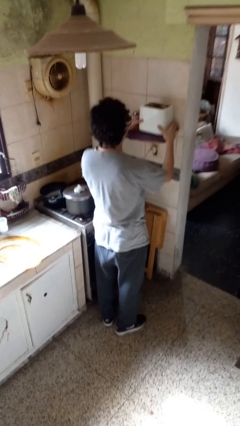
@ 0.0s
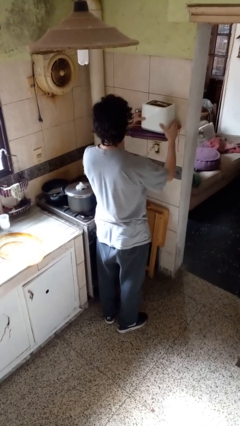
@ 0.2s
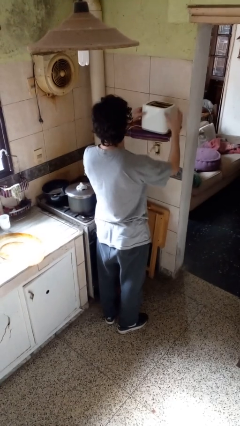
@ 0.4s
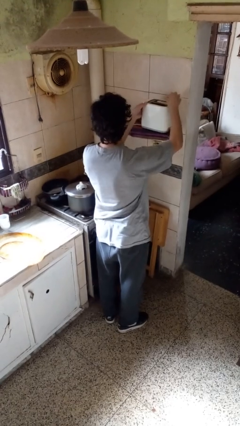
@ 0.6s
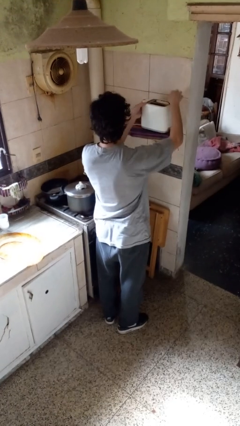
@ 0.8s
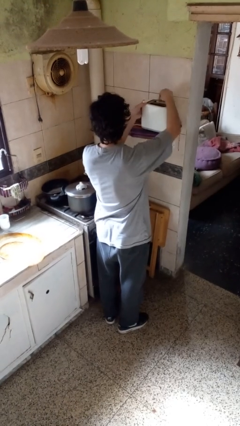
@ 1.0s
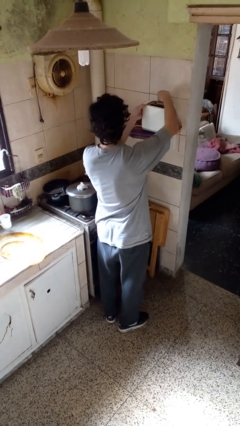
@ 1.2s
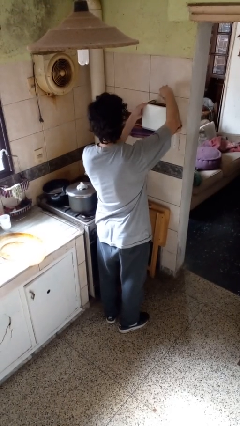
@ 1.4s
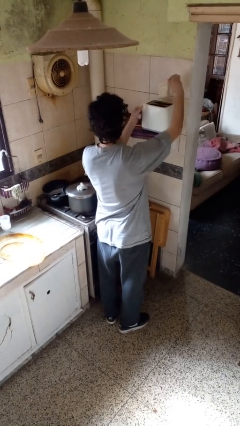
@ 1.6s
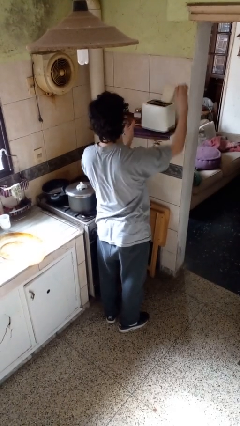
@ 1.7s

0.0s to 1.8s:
person takes object from toaster

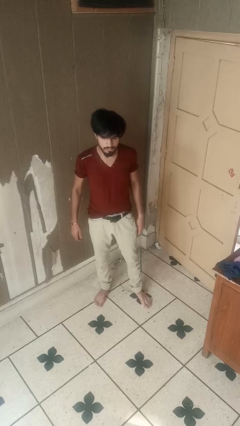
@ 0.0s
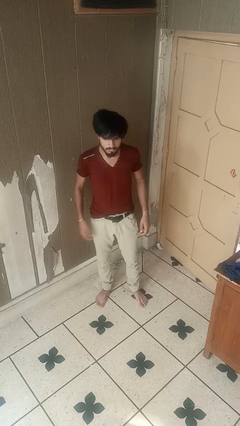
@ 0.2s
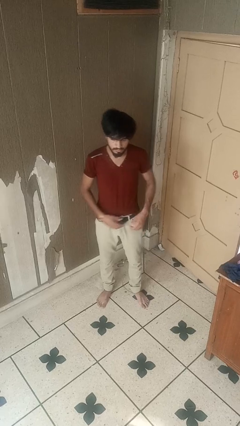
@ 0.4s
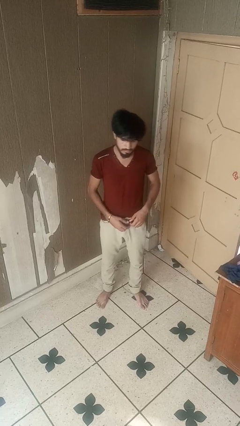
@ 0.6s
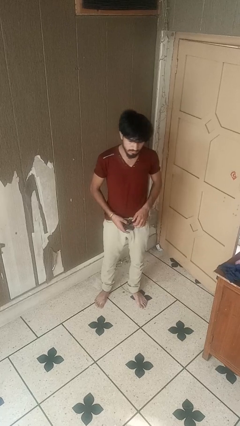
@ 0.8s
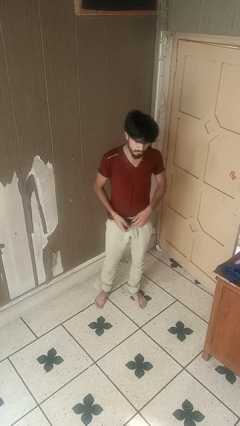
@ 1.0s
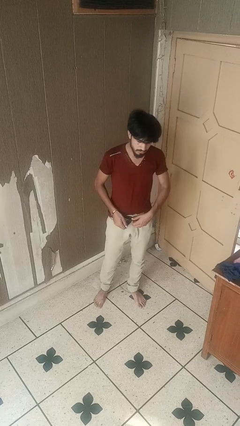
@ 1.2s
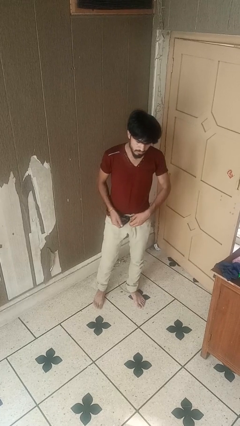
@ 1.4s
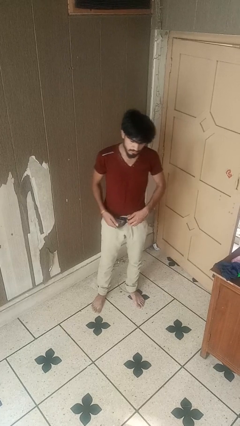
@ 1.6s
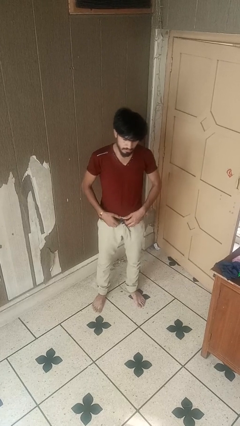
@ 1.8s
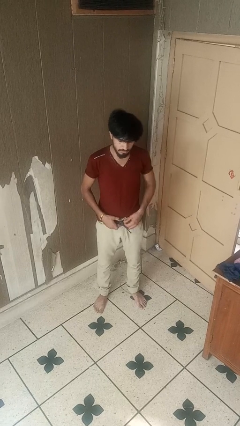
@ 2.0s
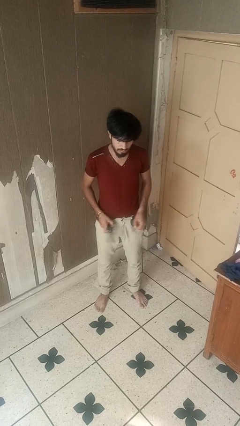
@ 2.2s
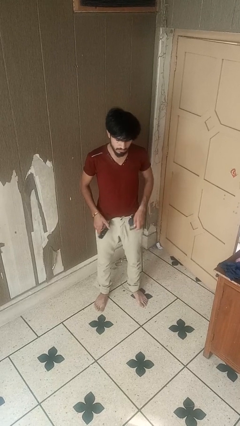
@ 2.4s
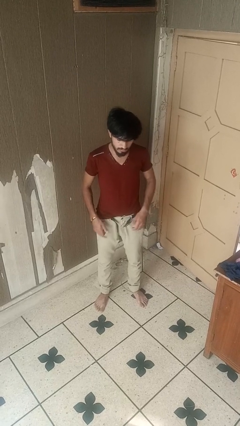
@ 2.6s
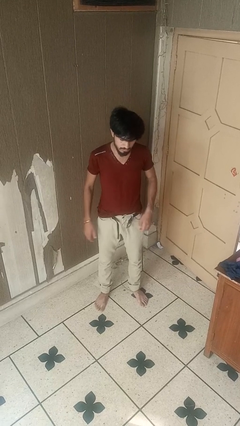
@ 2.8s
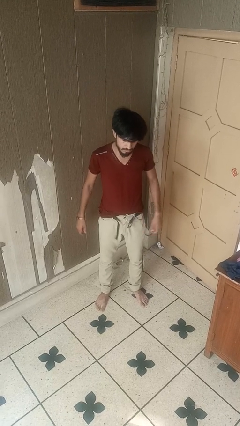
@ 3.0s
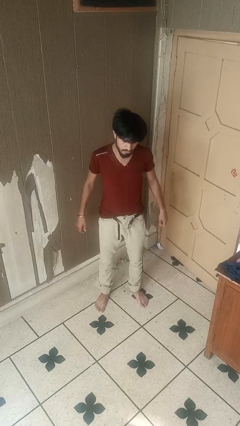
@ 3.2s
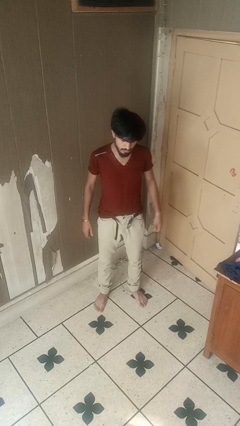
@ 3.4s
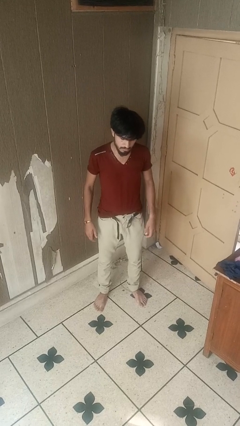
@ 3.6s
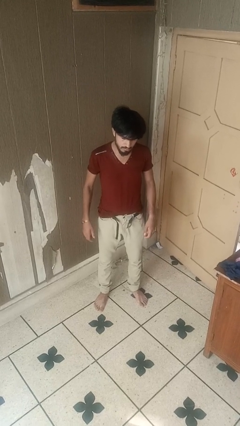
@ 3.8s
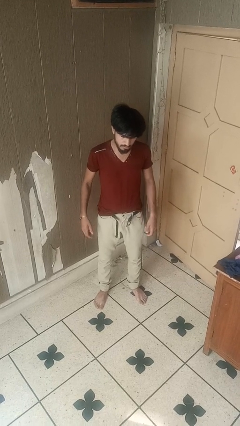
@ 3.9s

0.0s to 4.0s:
person takes off belt

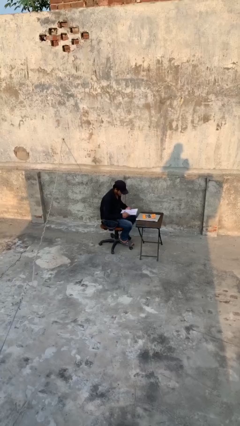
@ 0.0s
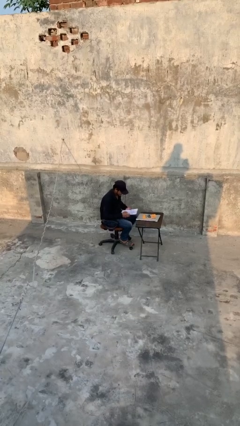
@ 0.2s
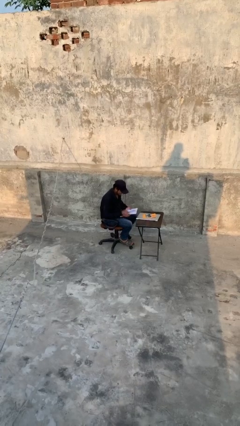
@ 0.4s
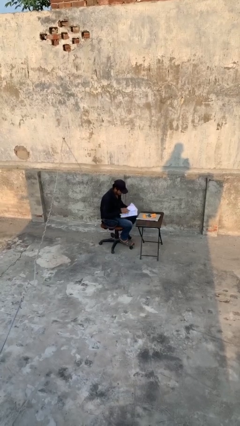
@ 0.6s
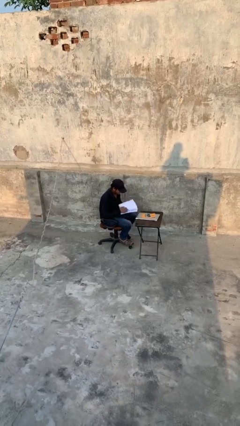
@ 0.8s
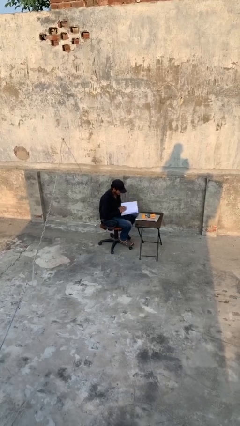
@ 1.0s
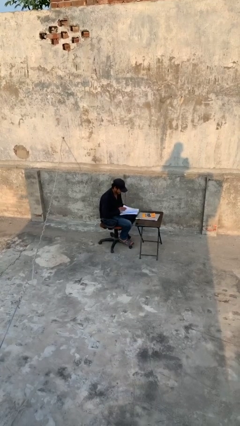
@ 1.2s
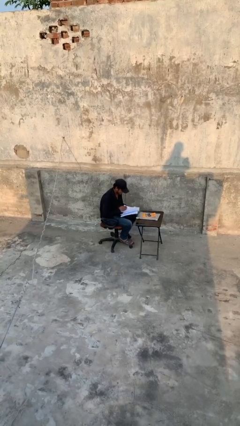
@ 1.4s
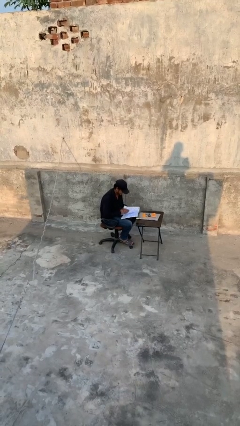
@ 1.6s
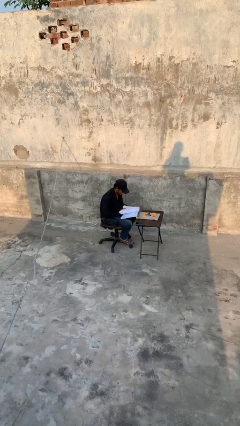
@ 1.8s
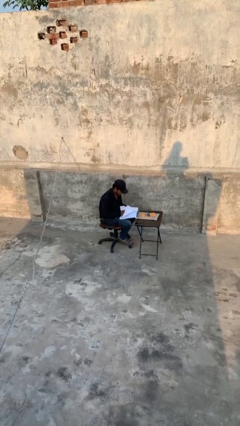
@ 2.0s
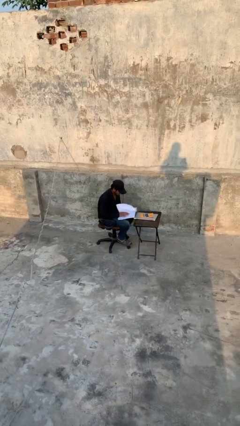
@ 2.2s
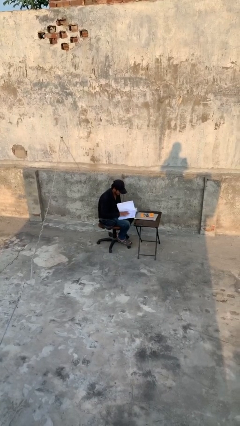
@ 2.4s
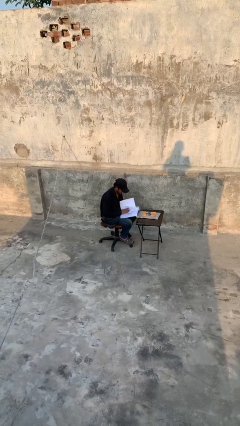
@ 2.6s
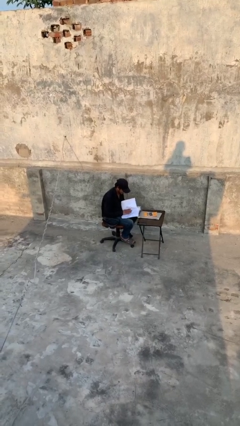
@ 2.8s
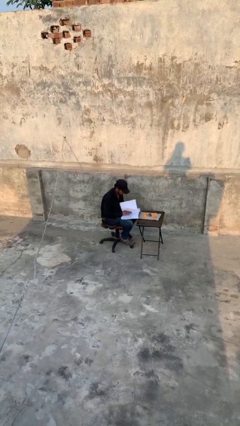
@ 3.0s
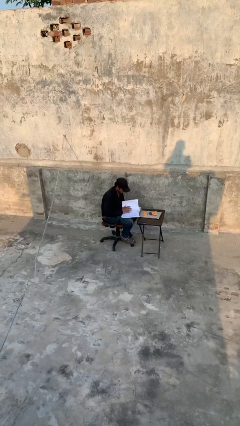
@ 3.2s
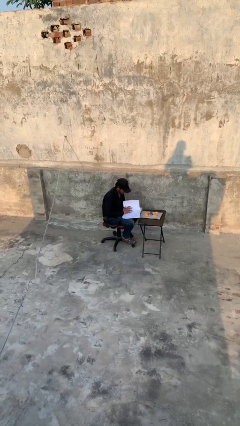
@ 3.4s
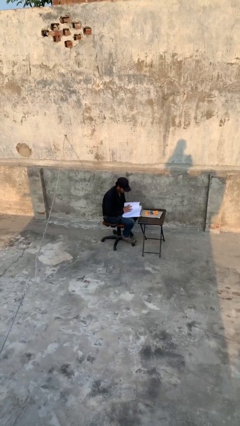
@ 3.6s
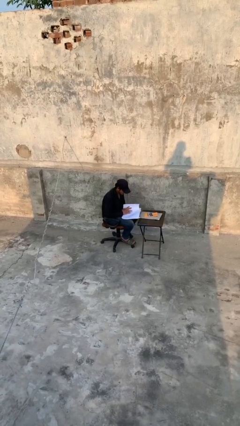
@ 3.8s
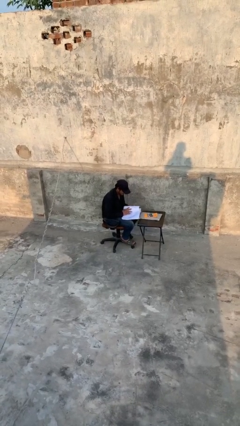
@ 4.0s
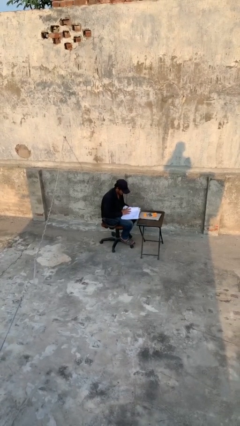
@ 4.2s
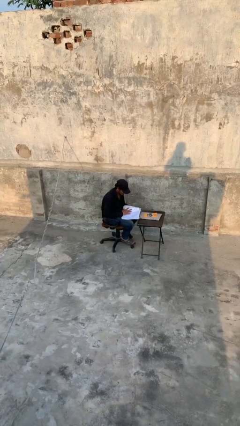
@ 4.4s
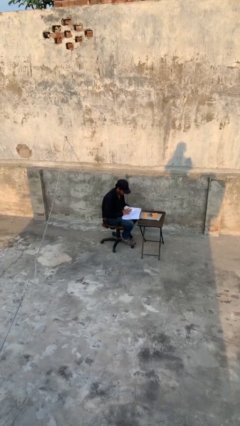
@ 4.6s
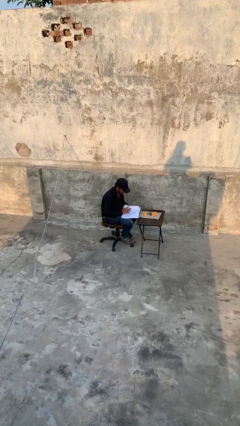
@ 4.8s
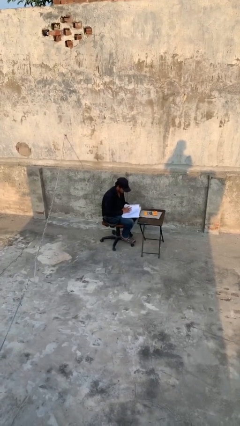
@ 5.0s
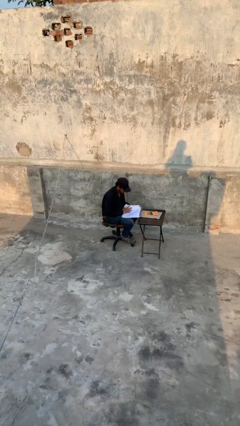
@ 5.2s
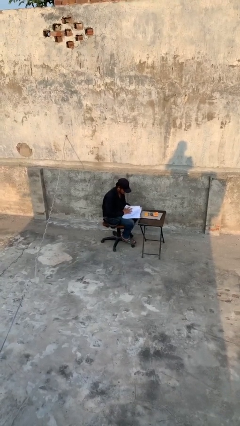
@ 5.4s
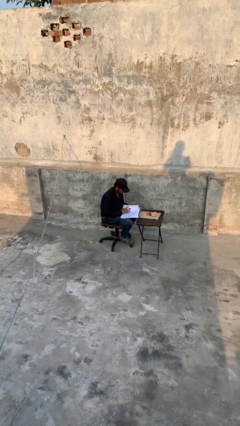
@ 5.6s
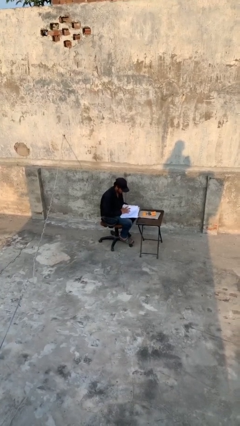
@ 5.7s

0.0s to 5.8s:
person reads document

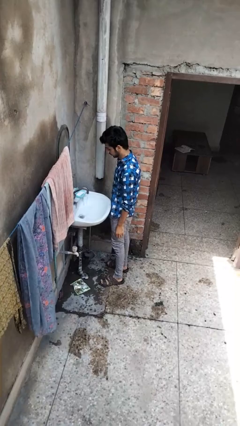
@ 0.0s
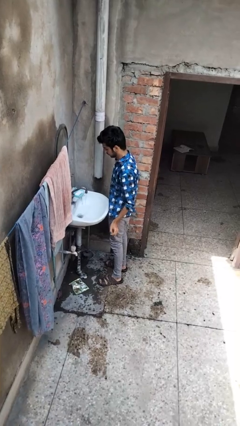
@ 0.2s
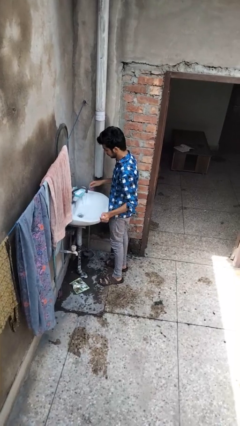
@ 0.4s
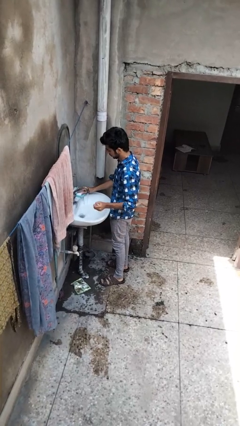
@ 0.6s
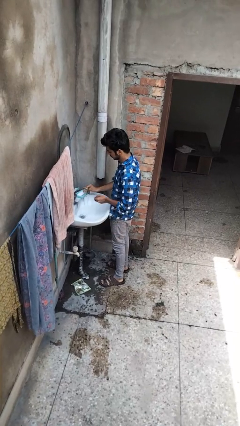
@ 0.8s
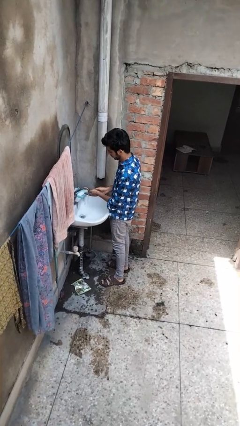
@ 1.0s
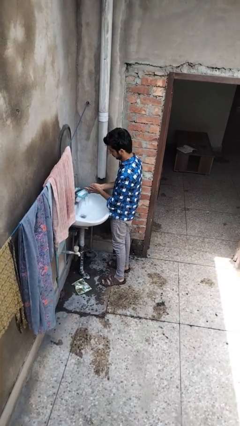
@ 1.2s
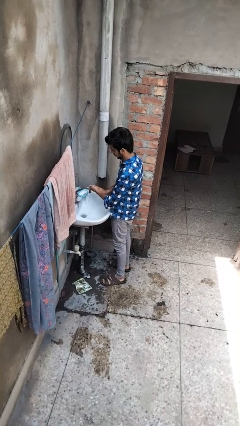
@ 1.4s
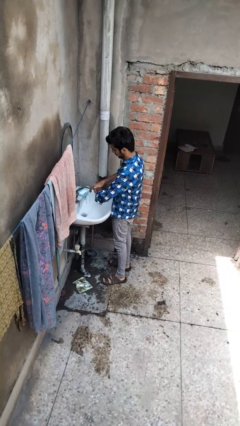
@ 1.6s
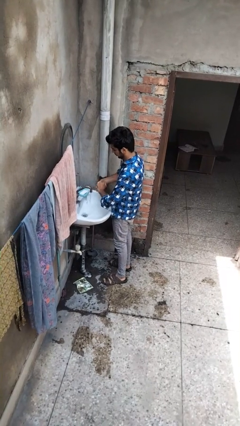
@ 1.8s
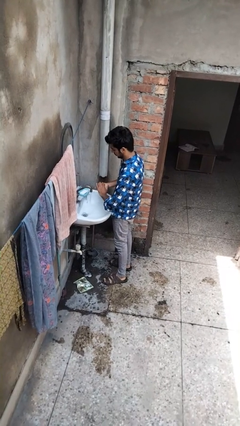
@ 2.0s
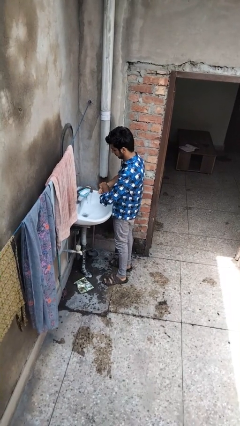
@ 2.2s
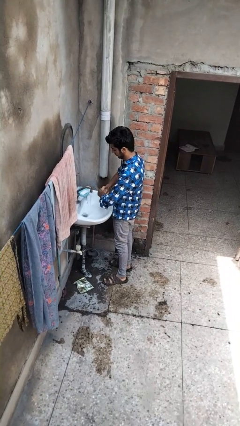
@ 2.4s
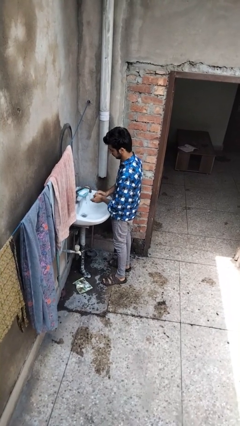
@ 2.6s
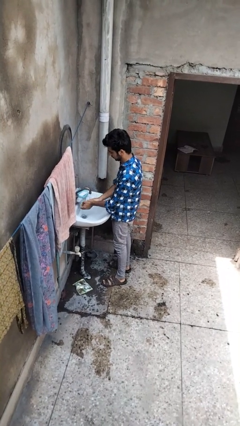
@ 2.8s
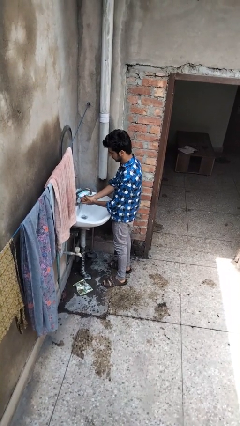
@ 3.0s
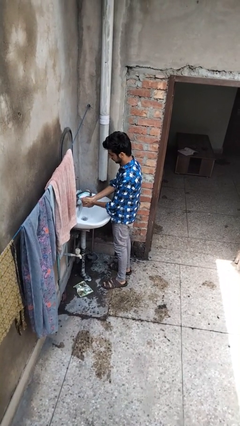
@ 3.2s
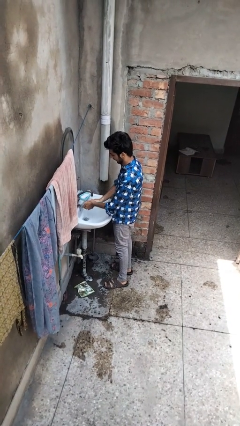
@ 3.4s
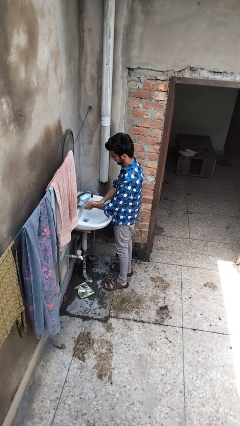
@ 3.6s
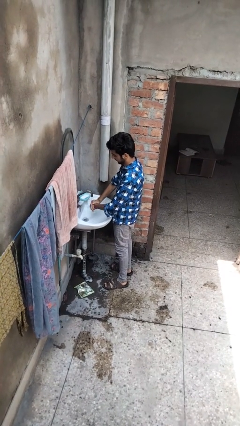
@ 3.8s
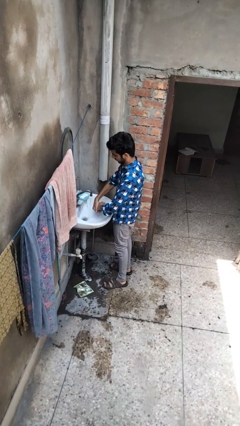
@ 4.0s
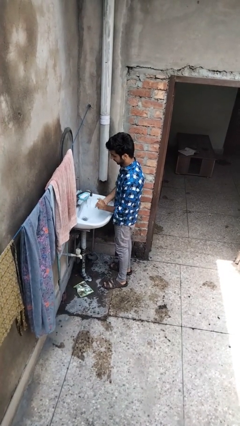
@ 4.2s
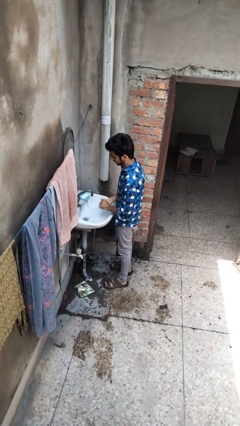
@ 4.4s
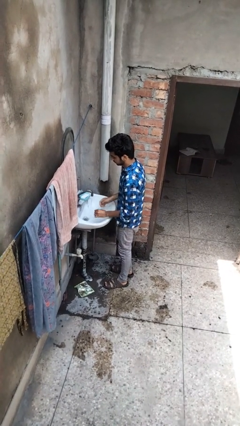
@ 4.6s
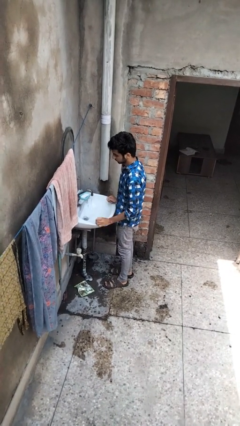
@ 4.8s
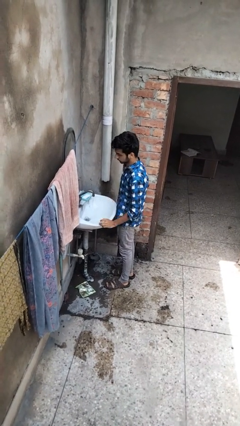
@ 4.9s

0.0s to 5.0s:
person washes hands

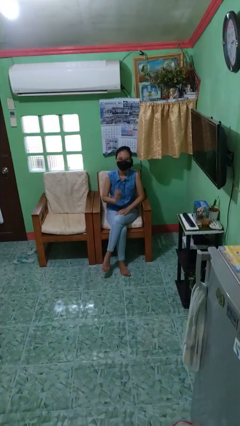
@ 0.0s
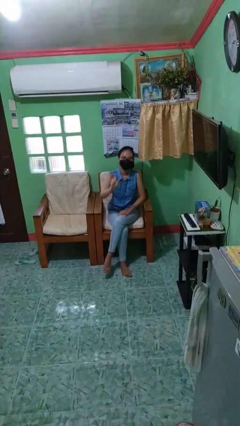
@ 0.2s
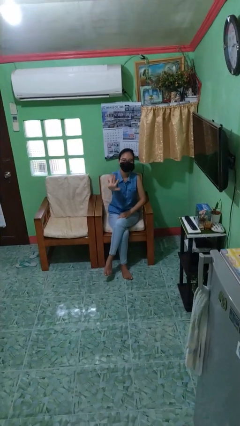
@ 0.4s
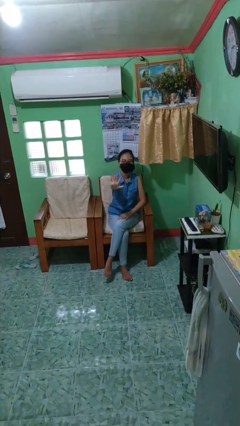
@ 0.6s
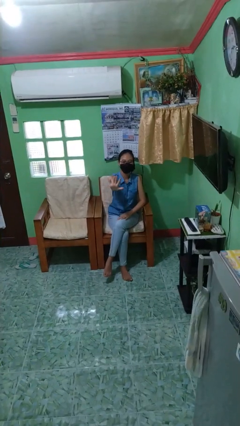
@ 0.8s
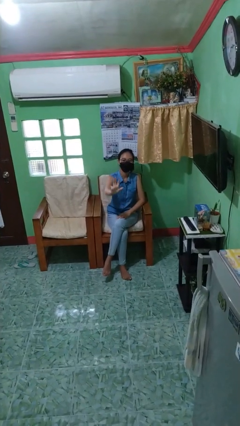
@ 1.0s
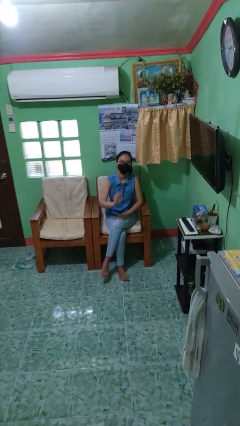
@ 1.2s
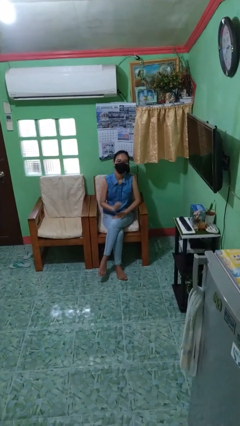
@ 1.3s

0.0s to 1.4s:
person gestures stop
